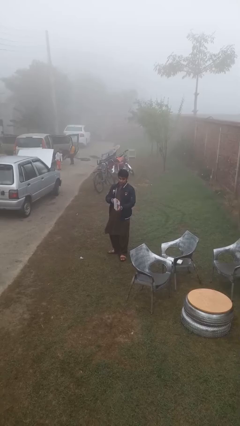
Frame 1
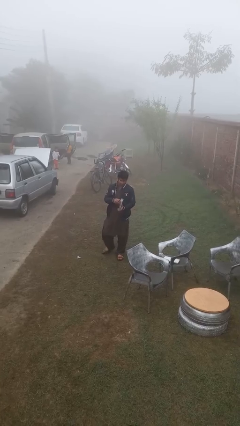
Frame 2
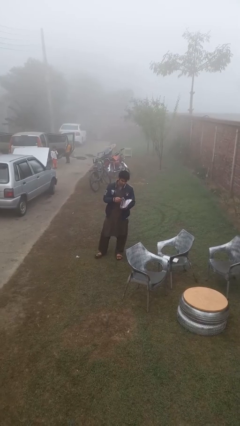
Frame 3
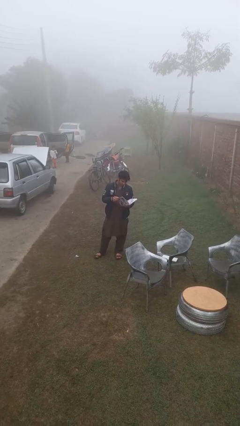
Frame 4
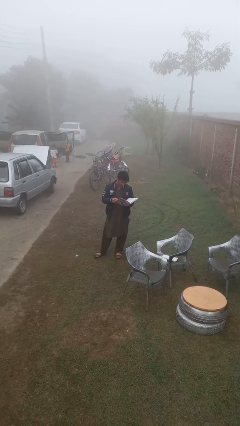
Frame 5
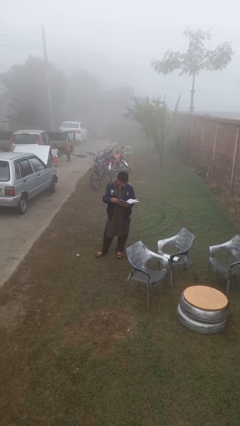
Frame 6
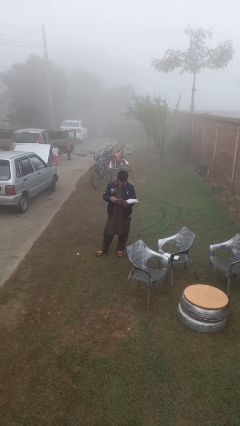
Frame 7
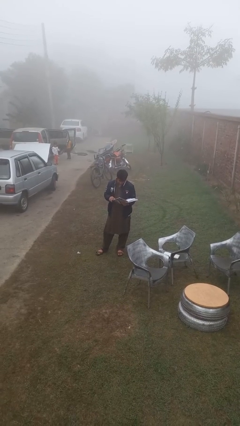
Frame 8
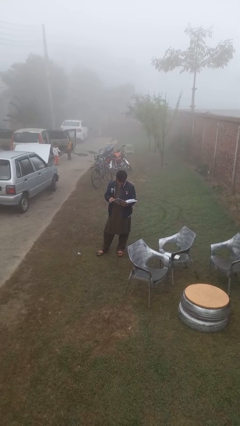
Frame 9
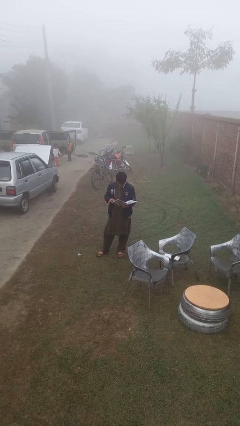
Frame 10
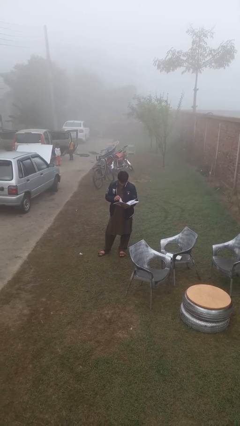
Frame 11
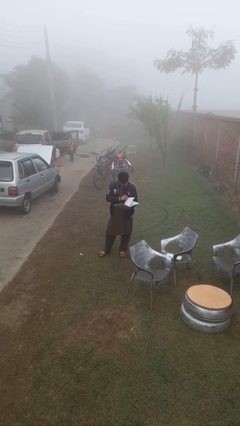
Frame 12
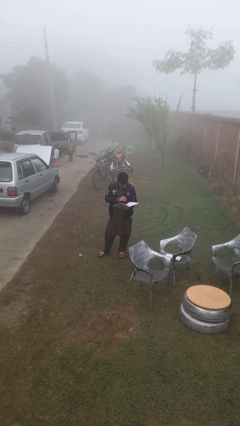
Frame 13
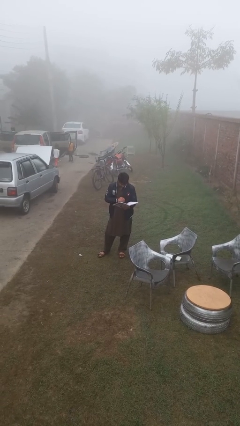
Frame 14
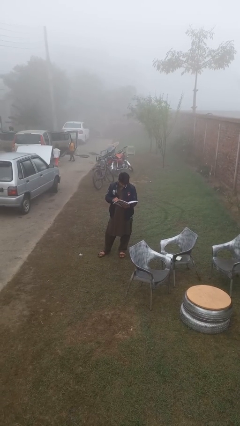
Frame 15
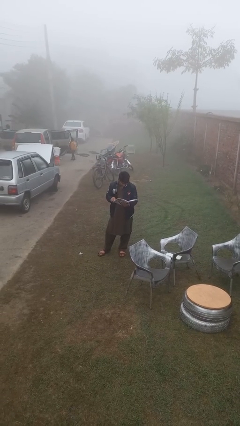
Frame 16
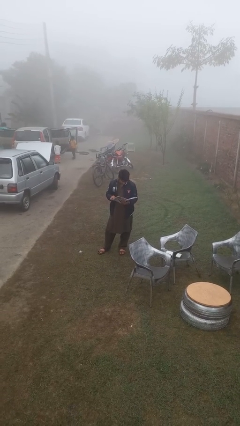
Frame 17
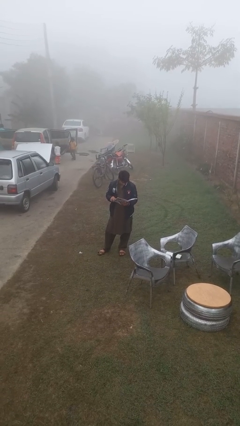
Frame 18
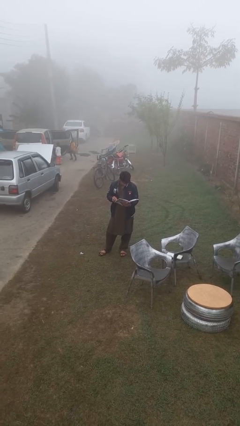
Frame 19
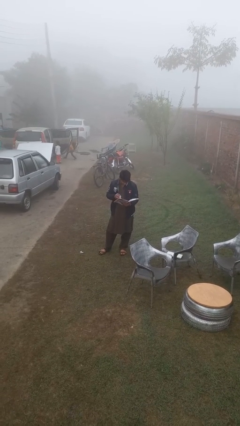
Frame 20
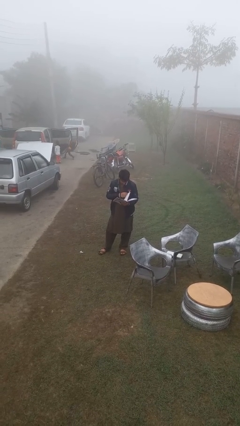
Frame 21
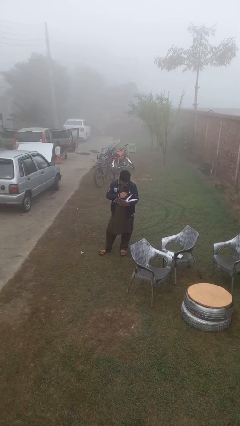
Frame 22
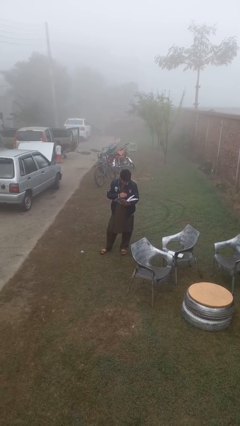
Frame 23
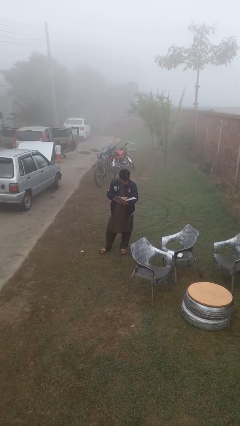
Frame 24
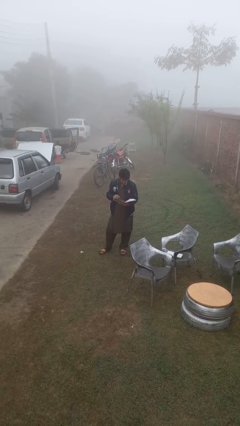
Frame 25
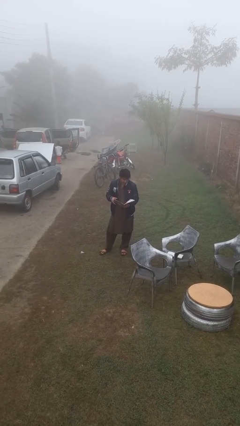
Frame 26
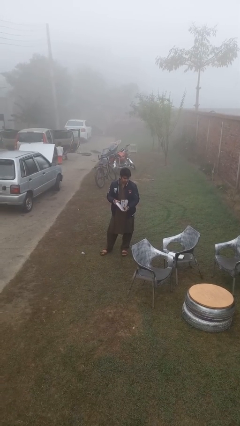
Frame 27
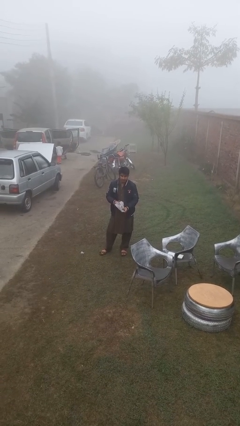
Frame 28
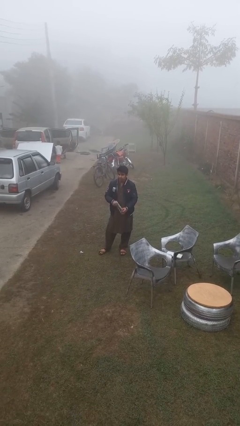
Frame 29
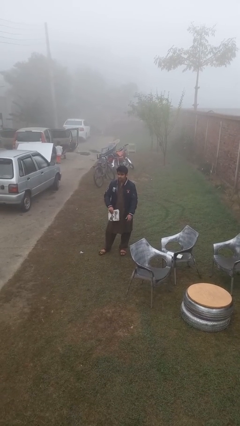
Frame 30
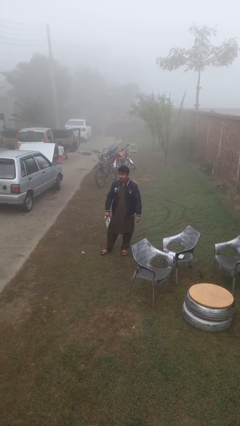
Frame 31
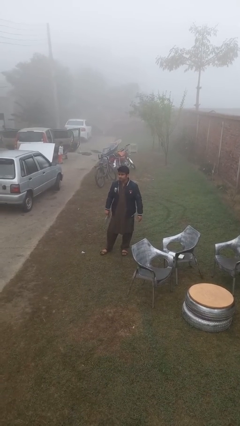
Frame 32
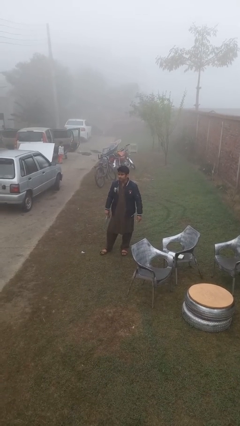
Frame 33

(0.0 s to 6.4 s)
person reads document

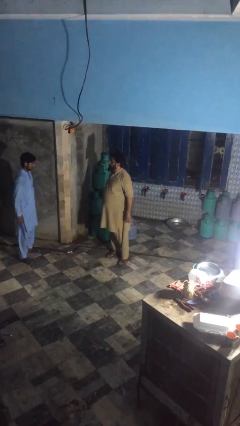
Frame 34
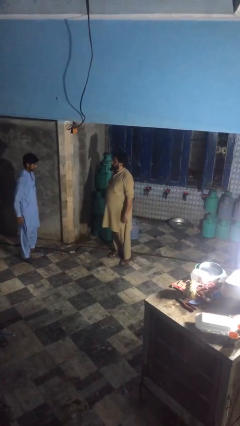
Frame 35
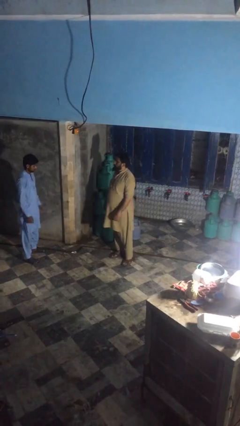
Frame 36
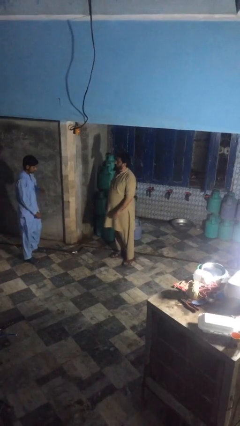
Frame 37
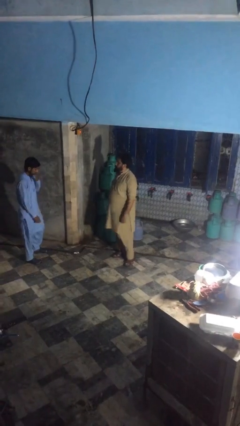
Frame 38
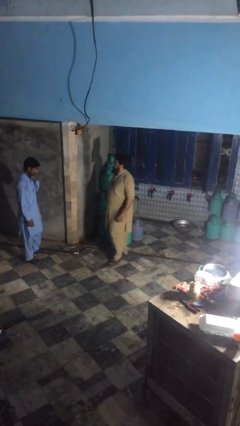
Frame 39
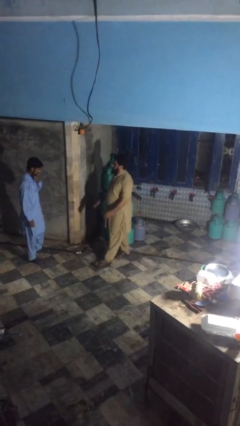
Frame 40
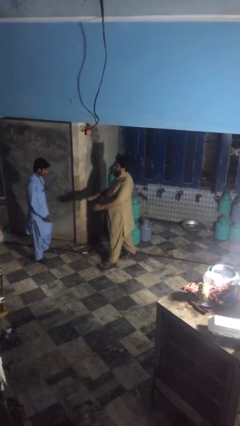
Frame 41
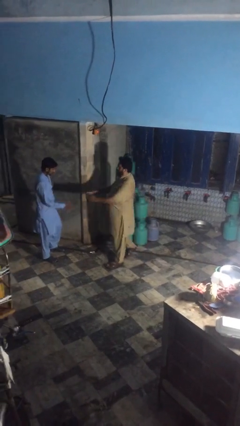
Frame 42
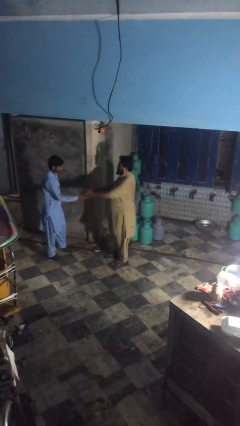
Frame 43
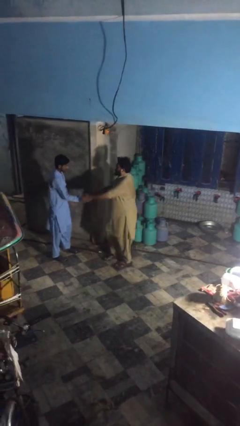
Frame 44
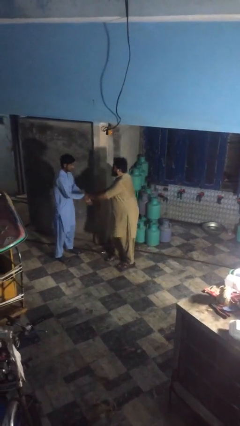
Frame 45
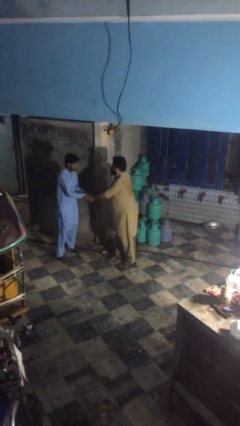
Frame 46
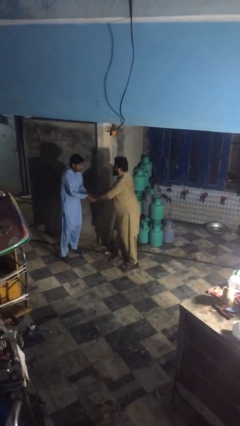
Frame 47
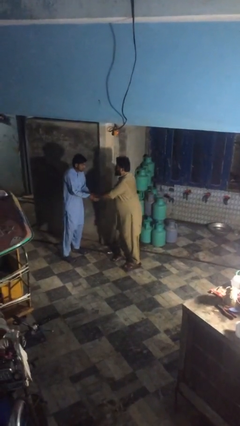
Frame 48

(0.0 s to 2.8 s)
person shakes hand

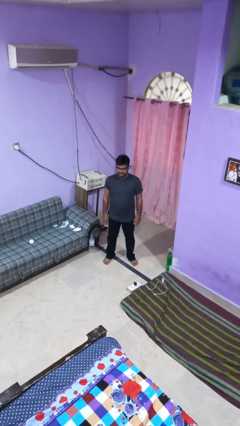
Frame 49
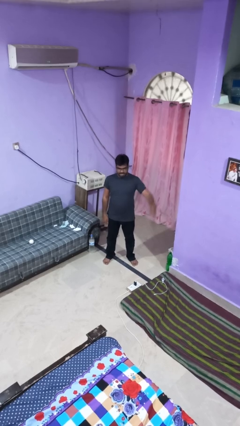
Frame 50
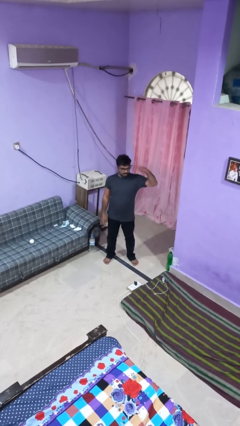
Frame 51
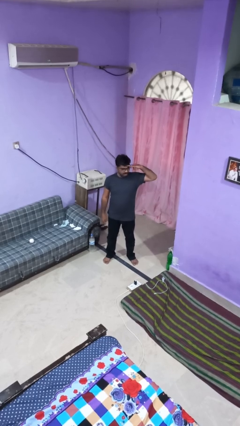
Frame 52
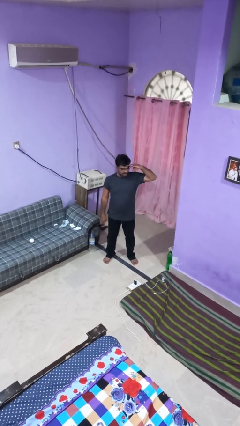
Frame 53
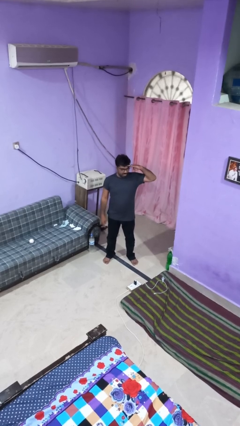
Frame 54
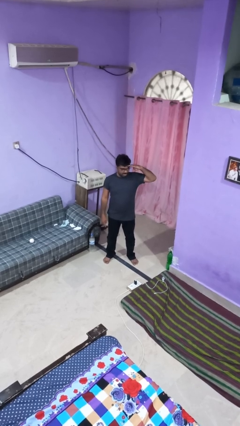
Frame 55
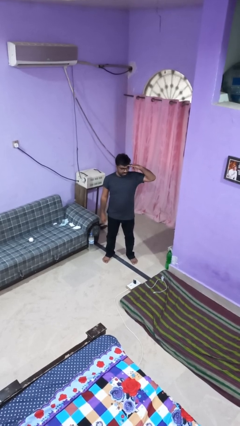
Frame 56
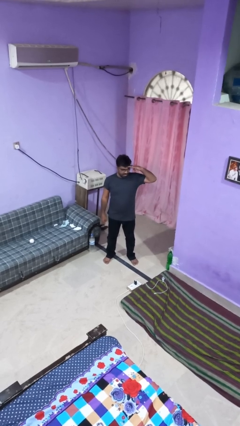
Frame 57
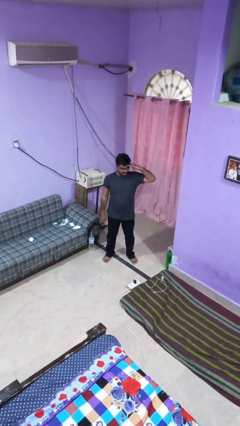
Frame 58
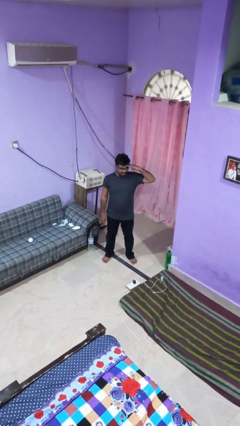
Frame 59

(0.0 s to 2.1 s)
person salutes

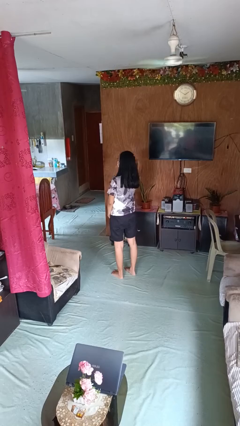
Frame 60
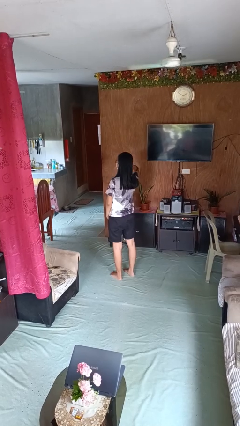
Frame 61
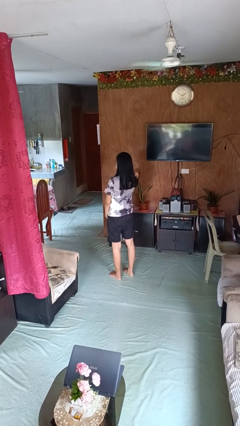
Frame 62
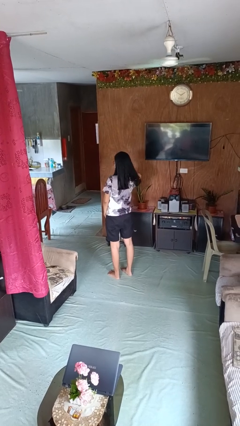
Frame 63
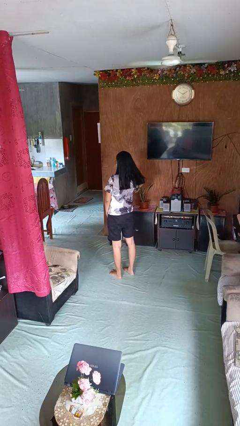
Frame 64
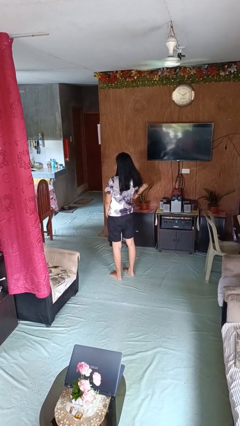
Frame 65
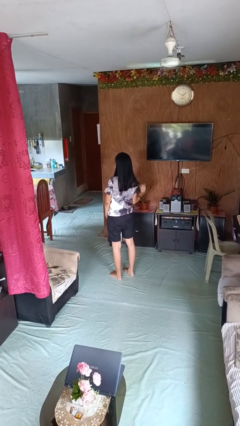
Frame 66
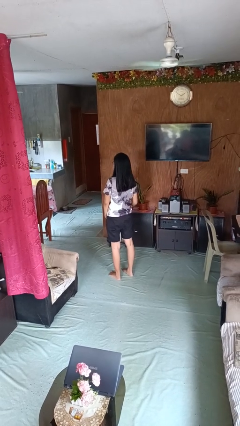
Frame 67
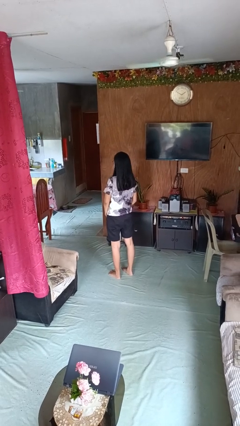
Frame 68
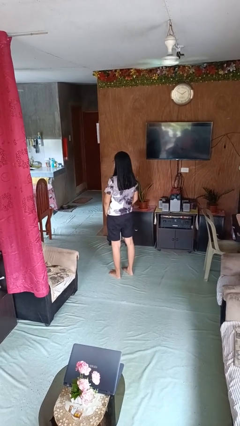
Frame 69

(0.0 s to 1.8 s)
person strokes hair

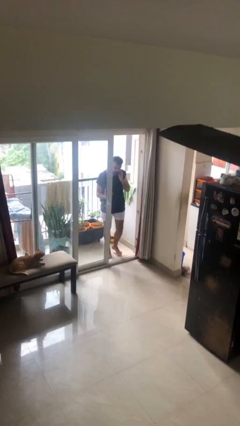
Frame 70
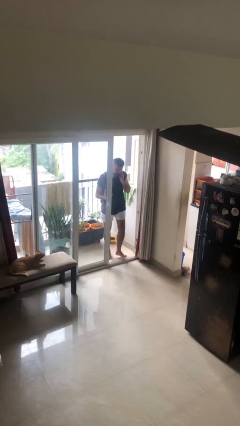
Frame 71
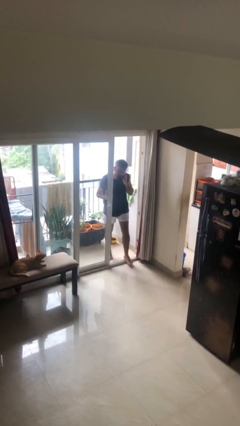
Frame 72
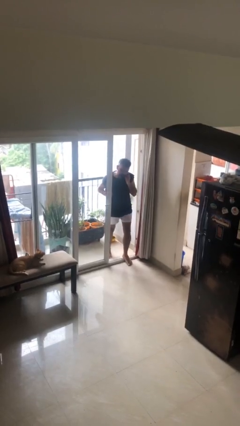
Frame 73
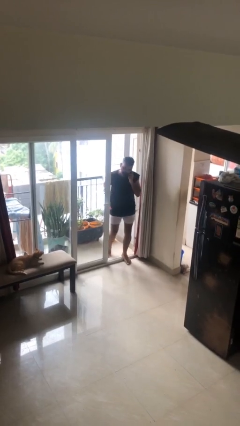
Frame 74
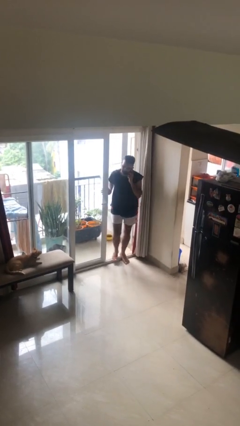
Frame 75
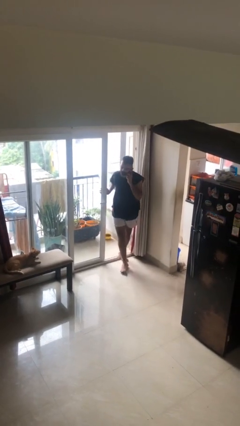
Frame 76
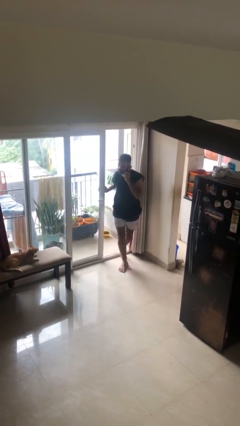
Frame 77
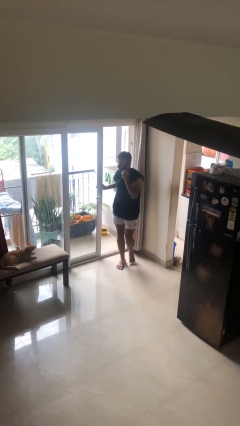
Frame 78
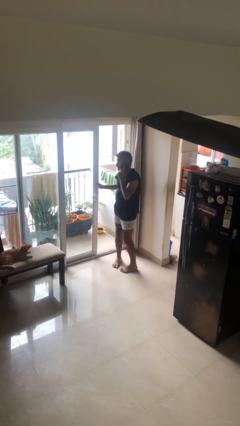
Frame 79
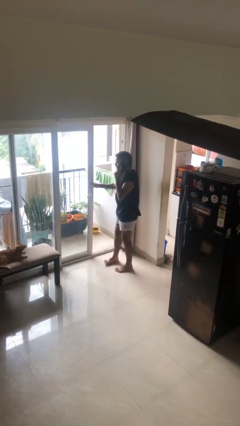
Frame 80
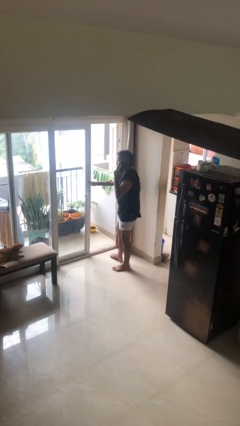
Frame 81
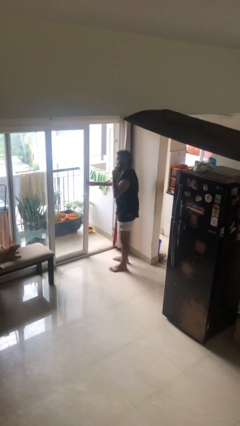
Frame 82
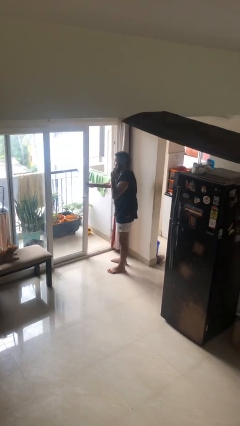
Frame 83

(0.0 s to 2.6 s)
person enters scene through structure

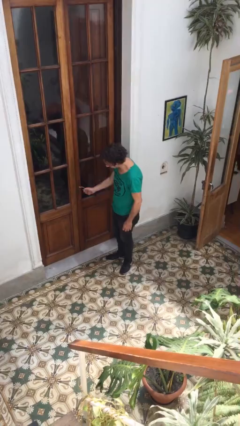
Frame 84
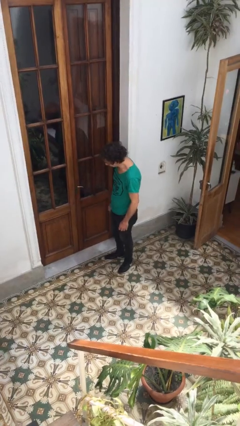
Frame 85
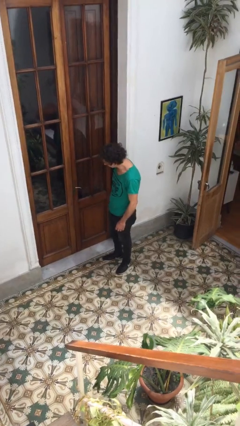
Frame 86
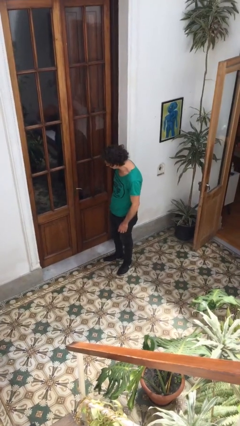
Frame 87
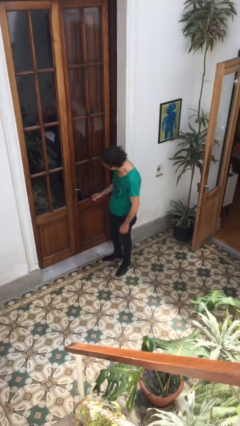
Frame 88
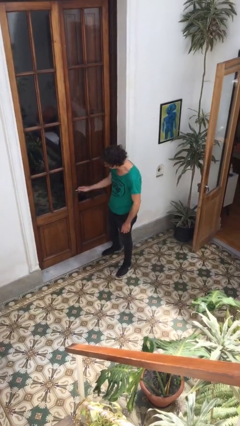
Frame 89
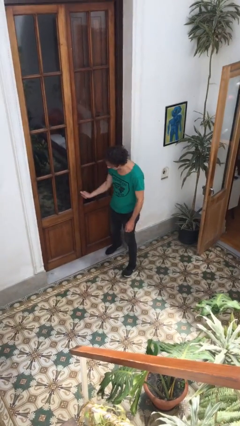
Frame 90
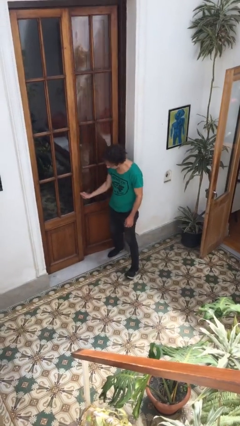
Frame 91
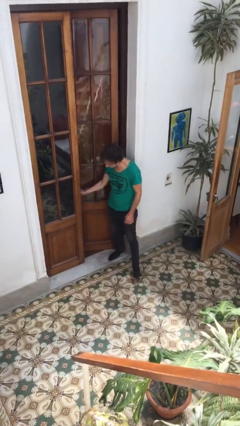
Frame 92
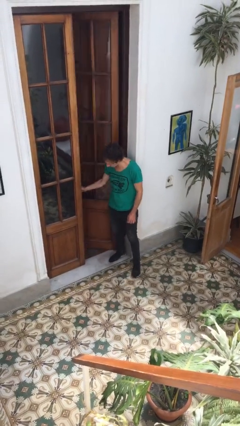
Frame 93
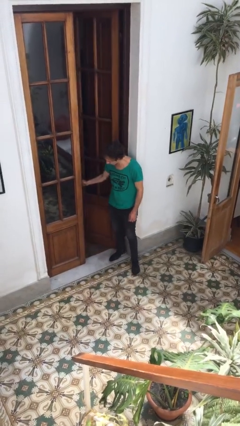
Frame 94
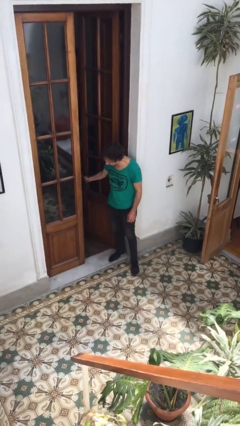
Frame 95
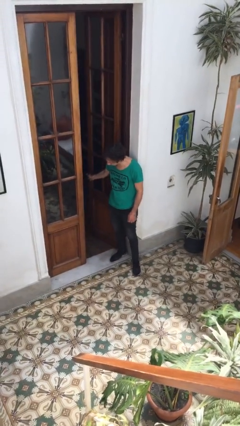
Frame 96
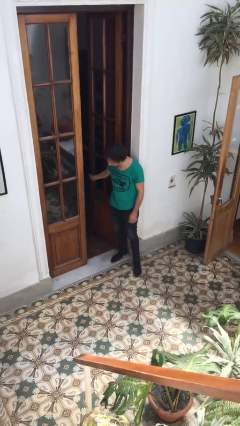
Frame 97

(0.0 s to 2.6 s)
person opens facility door
